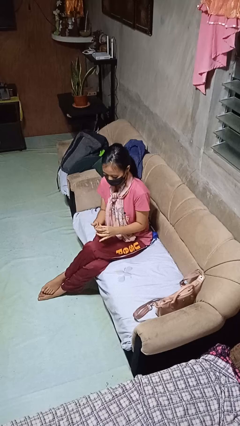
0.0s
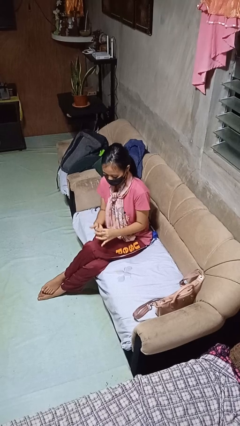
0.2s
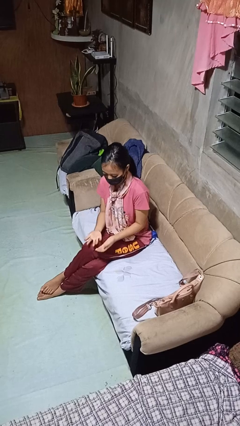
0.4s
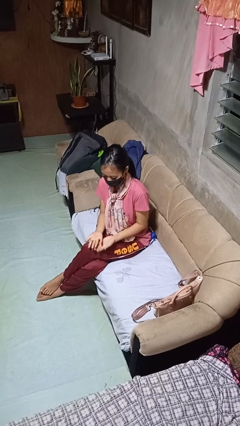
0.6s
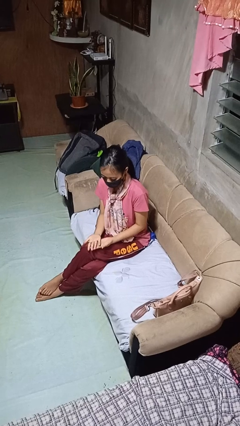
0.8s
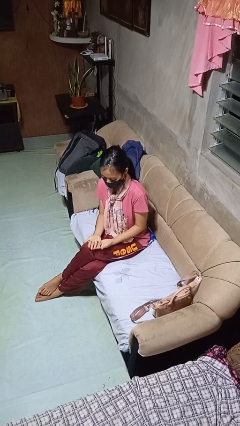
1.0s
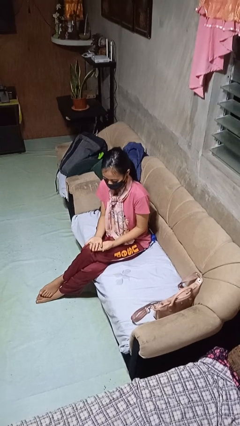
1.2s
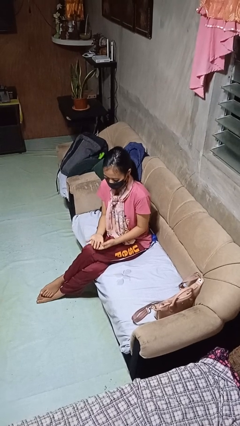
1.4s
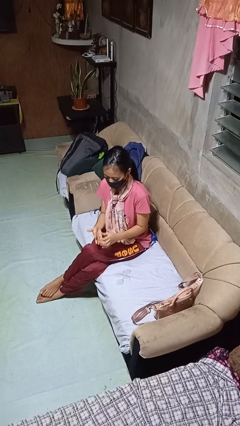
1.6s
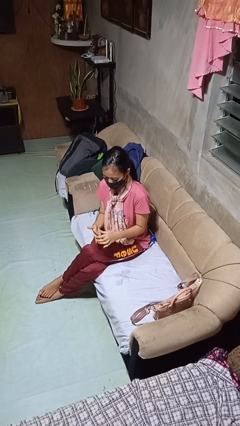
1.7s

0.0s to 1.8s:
person puts on ring

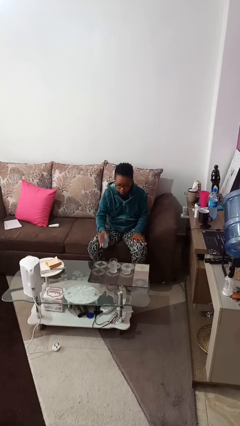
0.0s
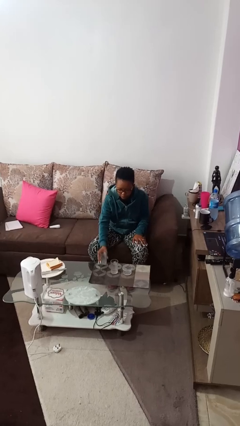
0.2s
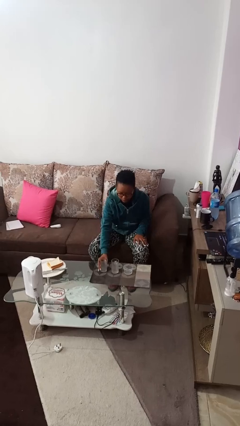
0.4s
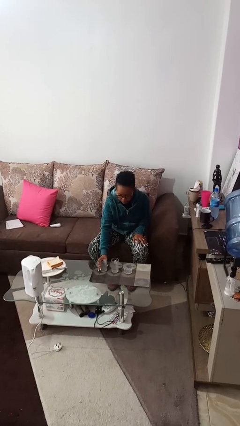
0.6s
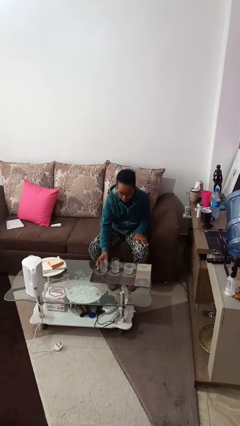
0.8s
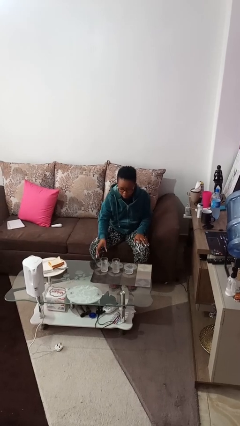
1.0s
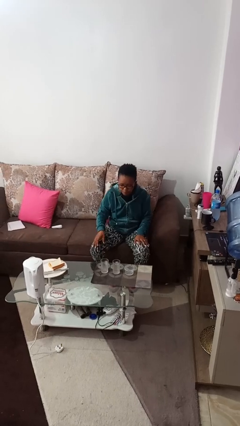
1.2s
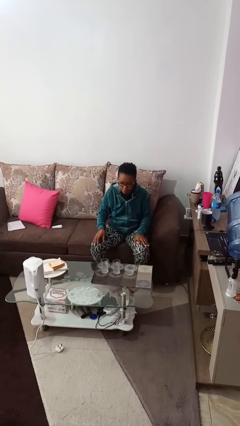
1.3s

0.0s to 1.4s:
person puts down object on table

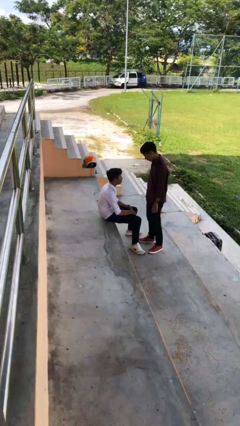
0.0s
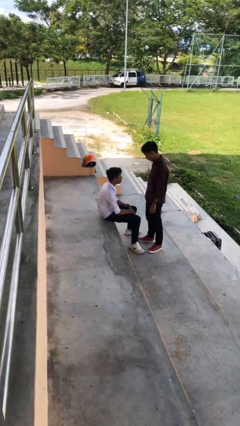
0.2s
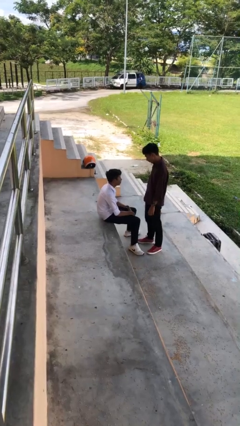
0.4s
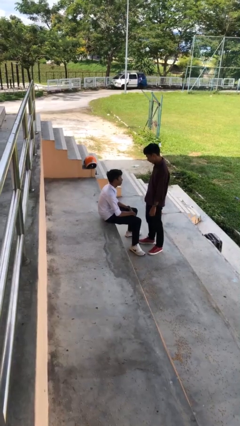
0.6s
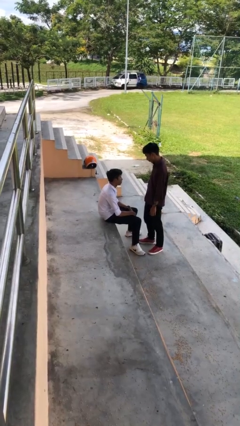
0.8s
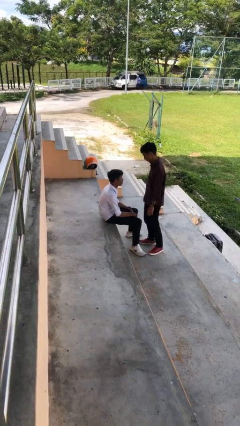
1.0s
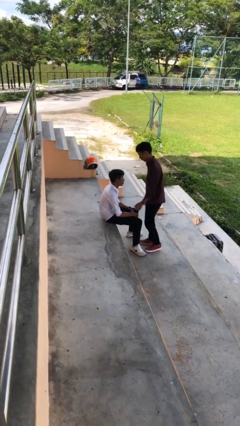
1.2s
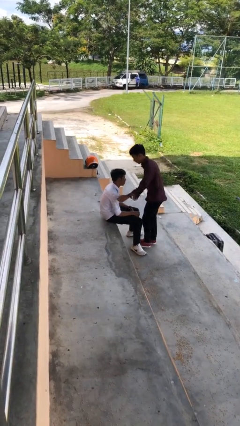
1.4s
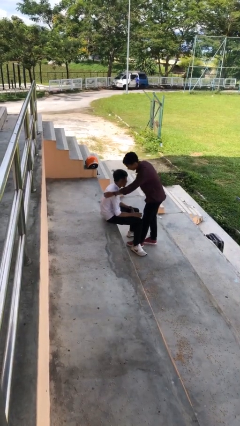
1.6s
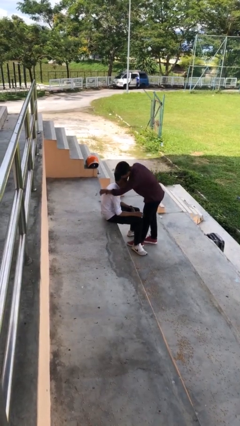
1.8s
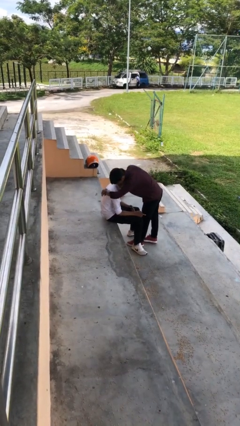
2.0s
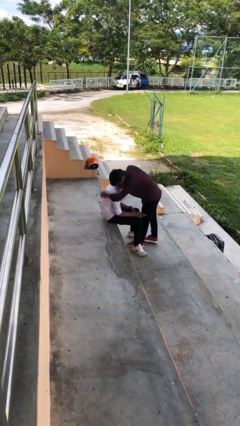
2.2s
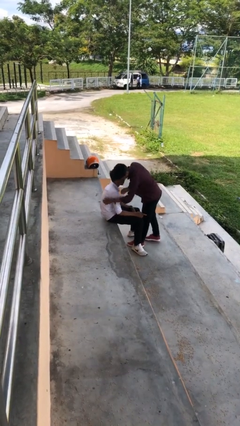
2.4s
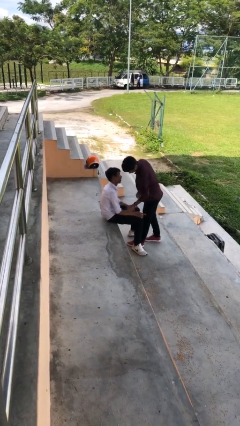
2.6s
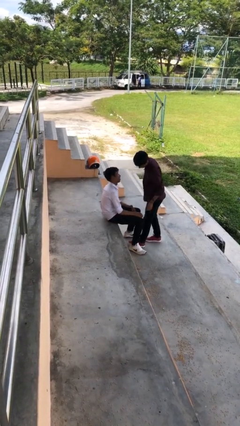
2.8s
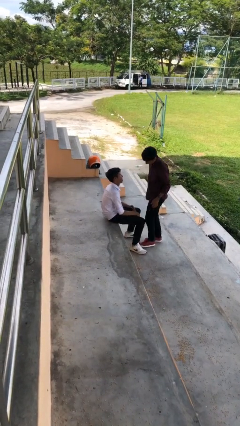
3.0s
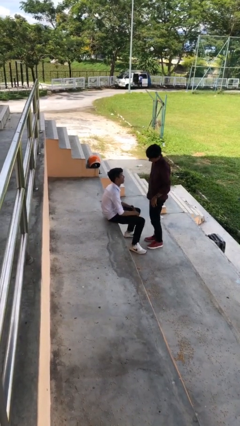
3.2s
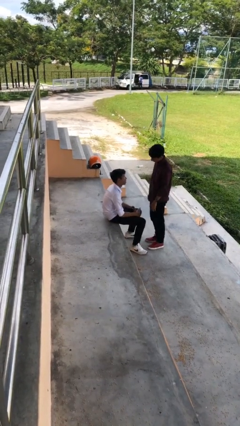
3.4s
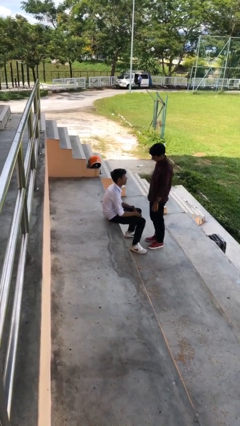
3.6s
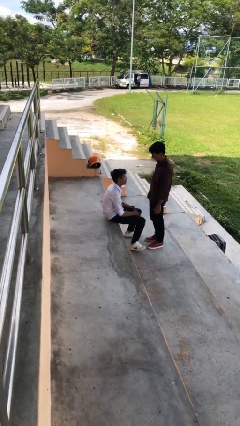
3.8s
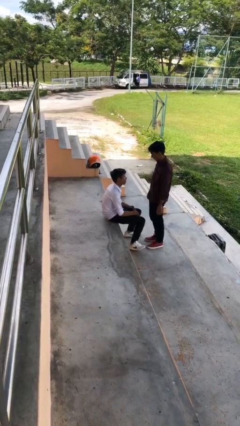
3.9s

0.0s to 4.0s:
person embraces person

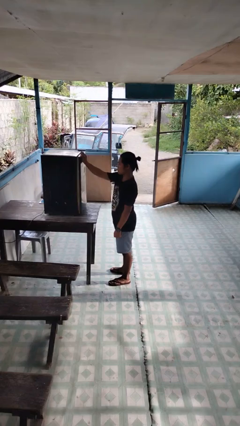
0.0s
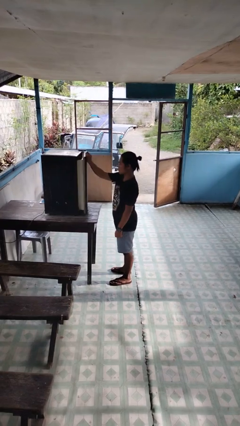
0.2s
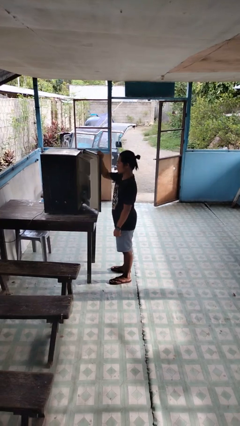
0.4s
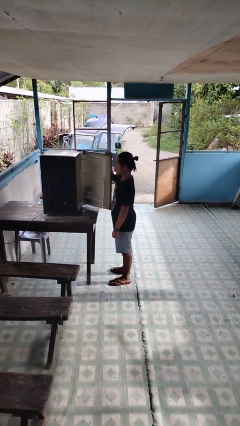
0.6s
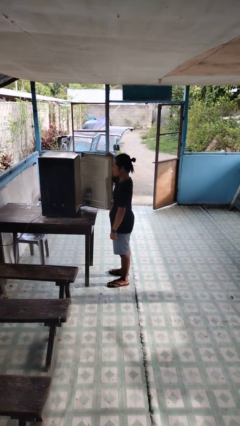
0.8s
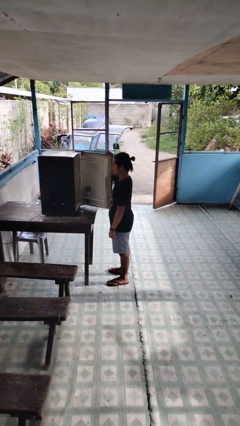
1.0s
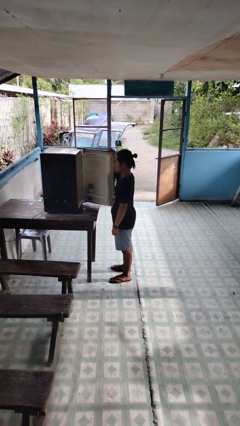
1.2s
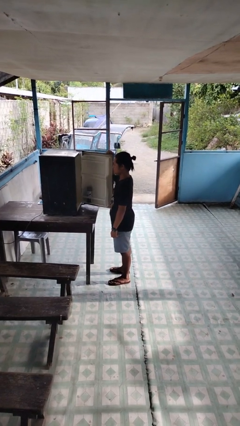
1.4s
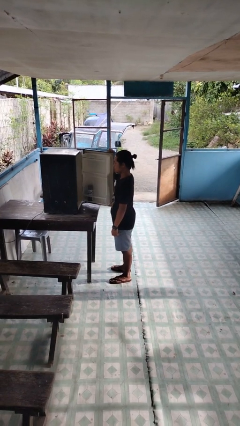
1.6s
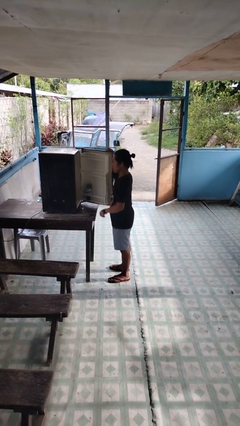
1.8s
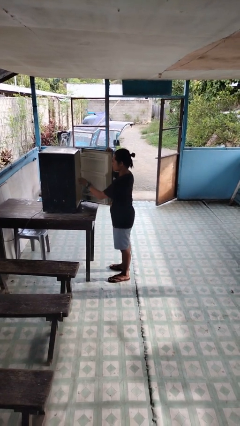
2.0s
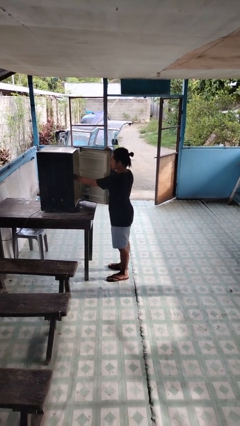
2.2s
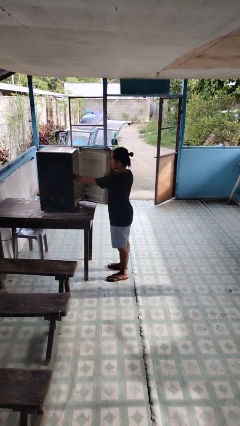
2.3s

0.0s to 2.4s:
person opens refrigerator

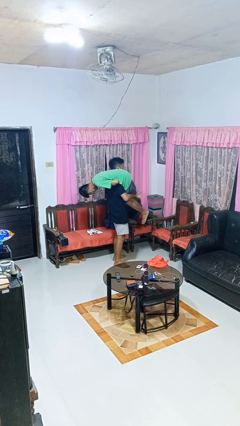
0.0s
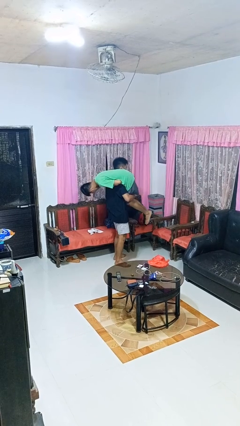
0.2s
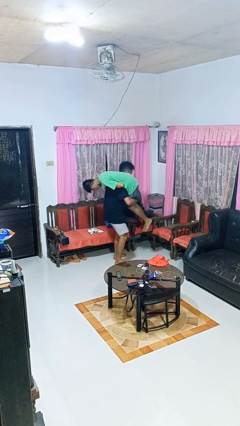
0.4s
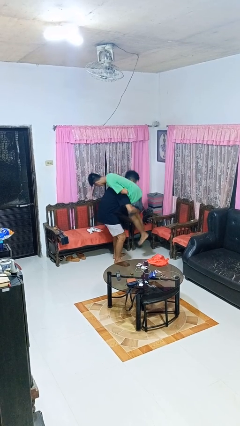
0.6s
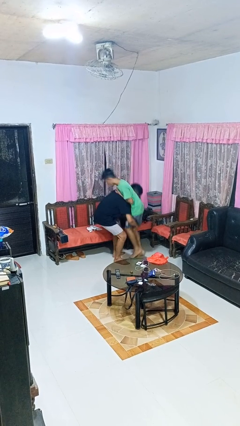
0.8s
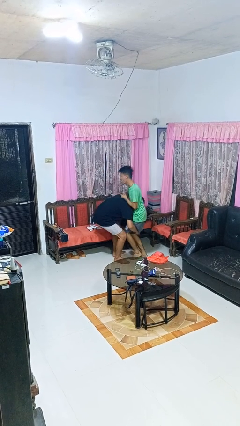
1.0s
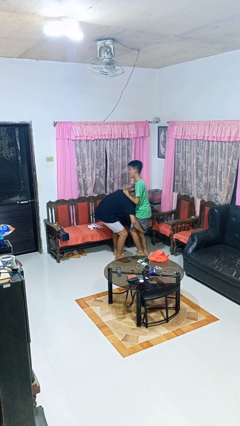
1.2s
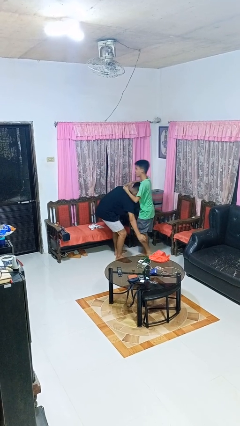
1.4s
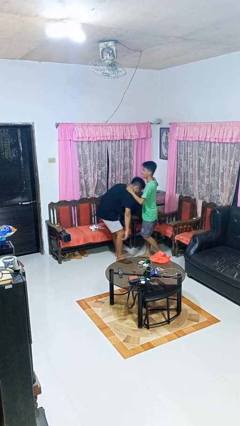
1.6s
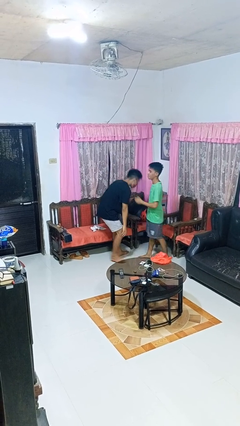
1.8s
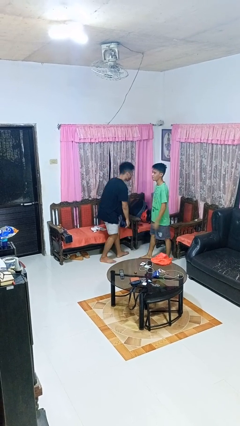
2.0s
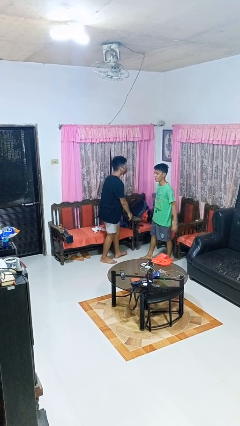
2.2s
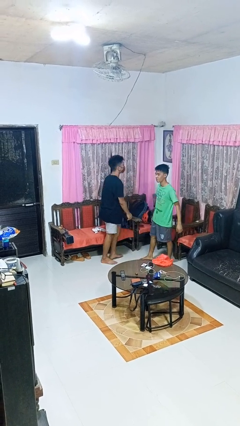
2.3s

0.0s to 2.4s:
person puts down person

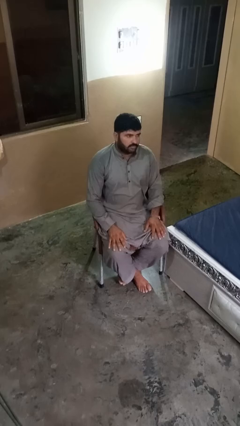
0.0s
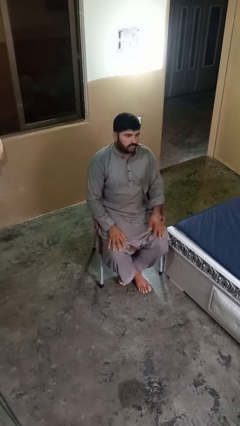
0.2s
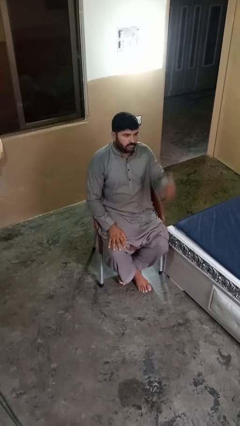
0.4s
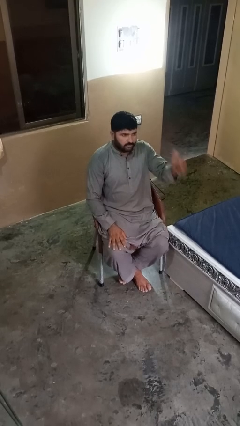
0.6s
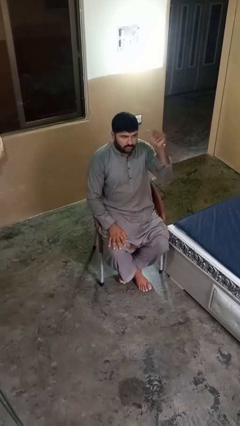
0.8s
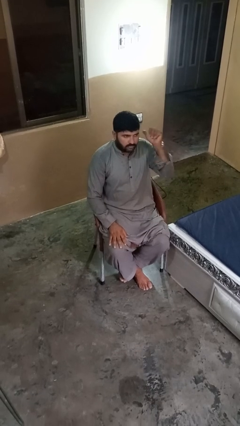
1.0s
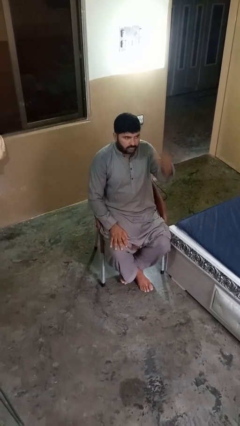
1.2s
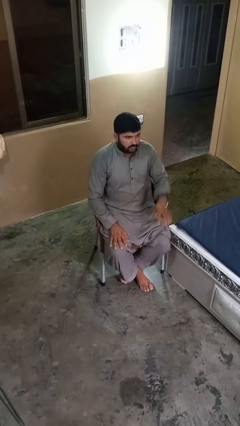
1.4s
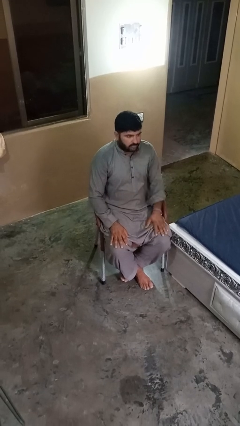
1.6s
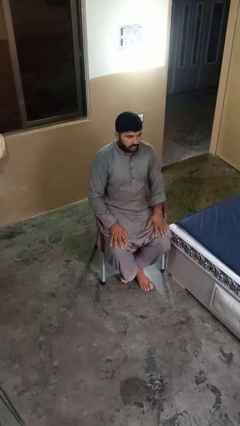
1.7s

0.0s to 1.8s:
person gestures behind me

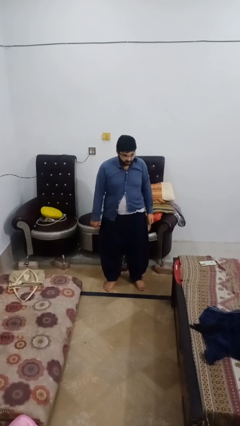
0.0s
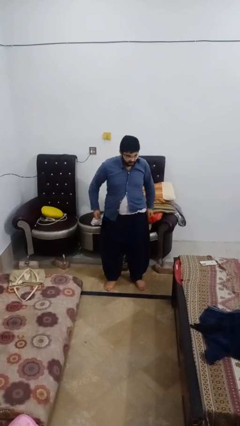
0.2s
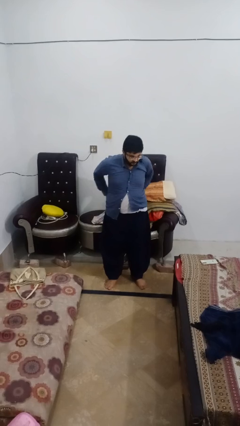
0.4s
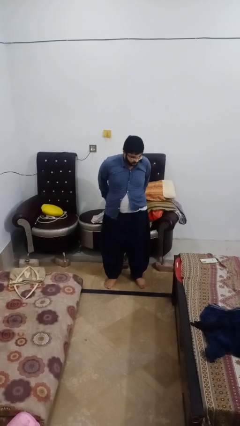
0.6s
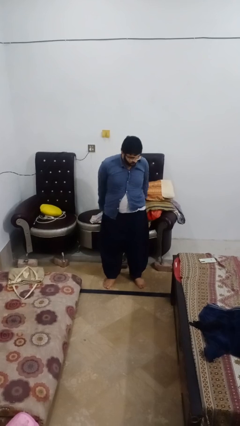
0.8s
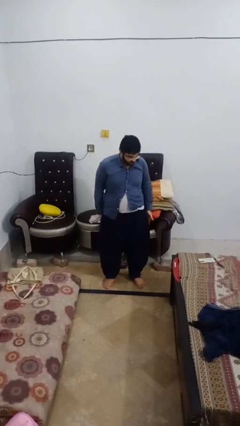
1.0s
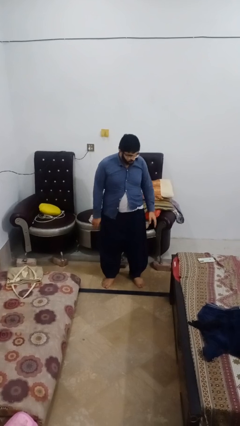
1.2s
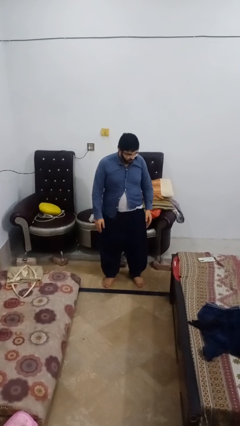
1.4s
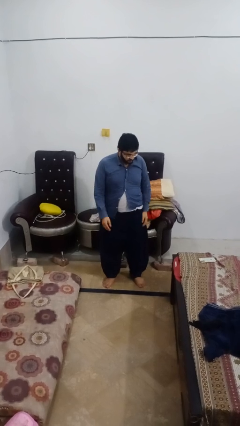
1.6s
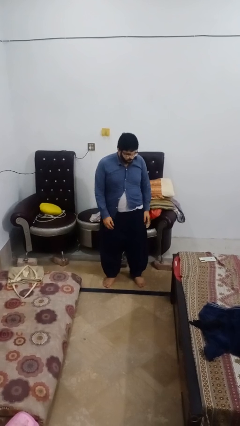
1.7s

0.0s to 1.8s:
person puts hands in back pockets

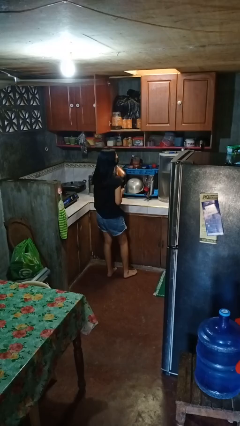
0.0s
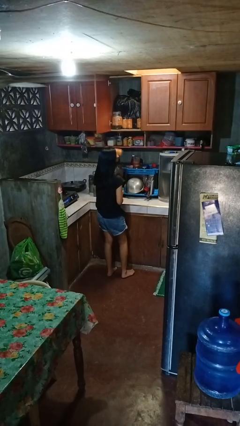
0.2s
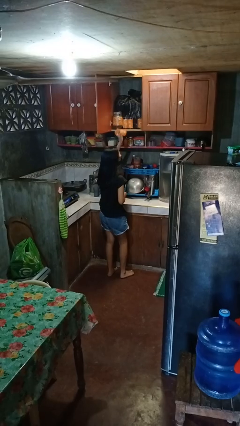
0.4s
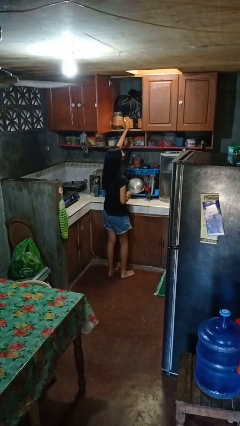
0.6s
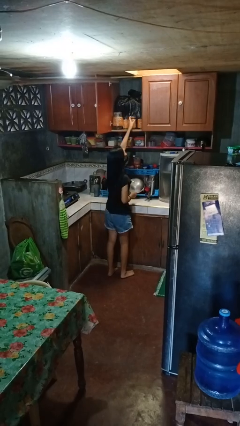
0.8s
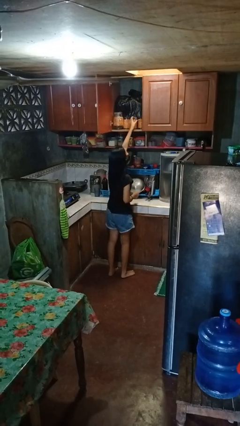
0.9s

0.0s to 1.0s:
person puts down object into cabinet

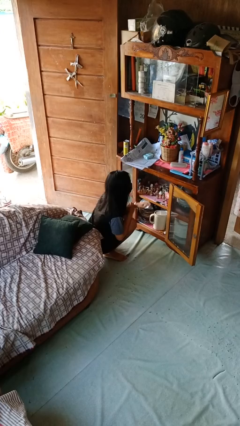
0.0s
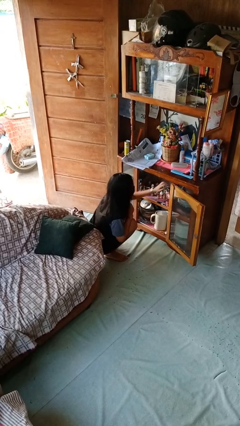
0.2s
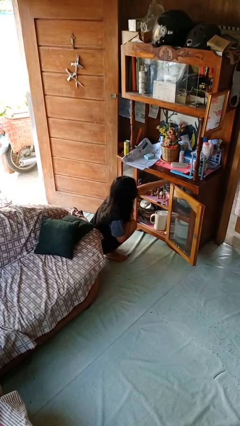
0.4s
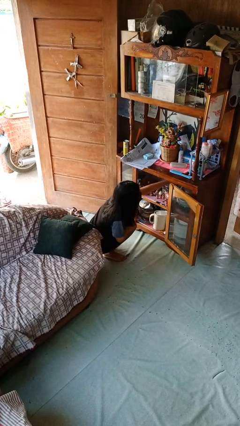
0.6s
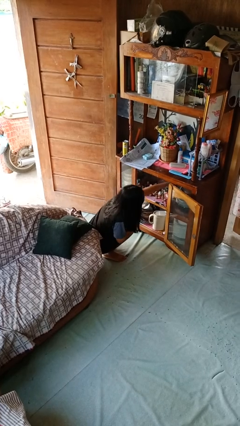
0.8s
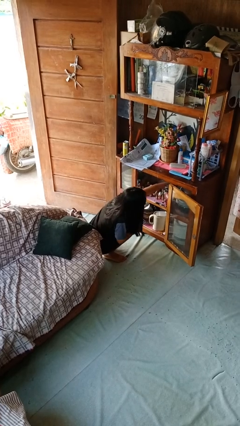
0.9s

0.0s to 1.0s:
person searches in cabinet
